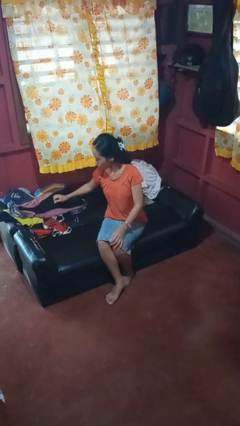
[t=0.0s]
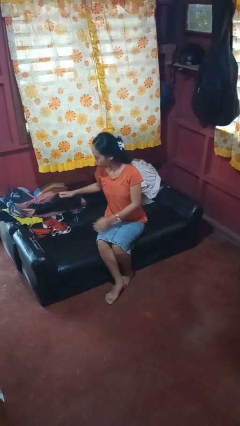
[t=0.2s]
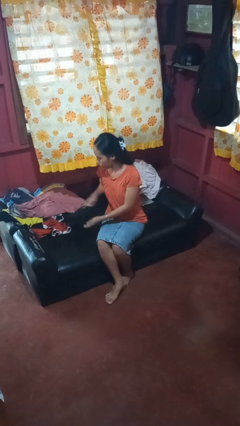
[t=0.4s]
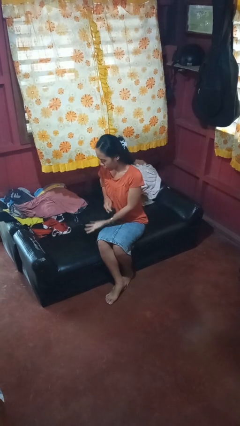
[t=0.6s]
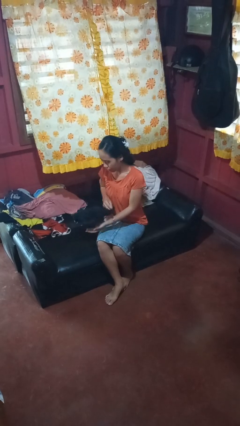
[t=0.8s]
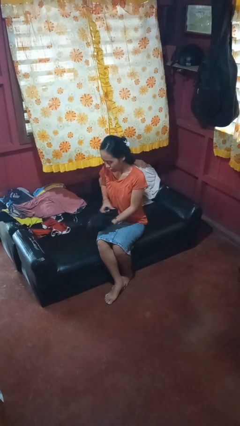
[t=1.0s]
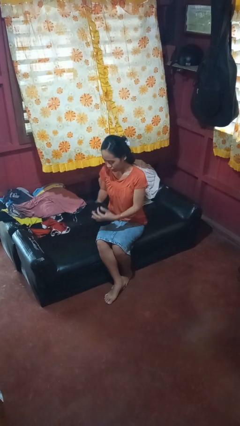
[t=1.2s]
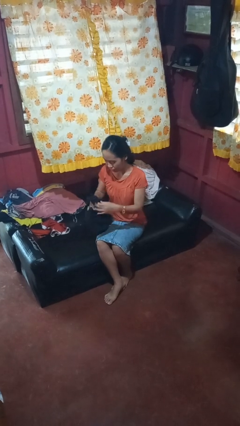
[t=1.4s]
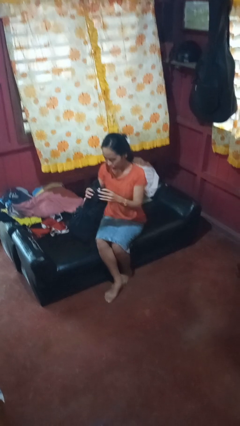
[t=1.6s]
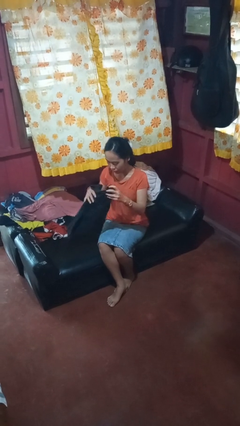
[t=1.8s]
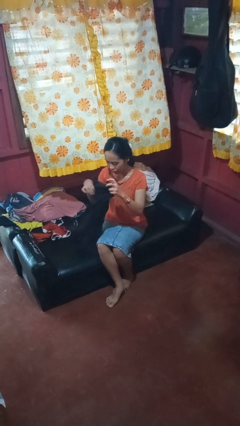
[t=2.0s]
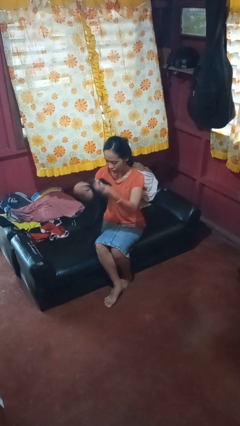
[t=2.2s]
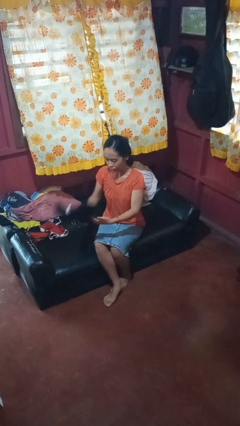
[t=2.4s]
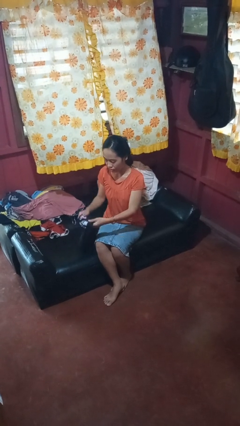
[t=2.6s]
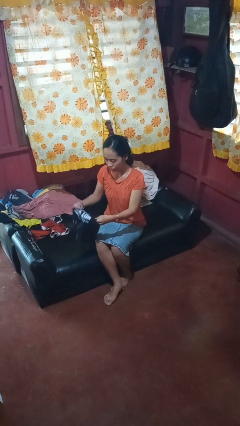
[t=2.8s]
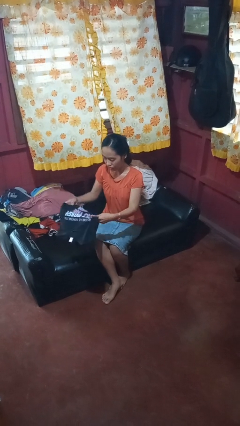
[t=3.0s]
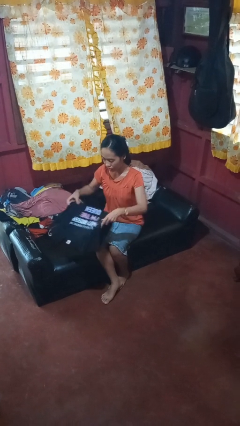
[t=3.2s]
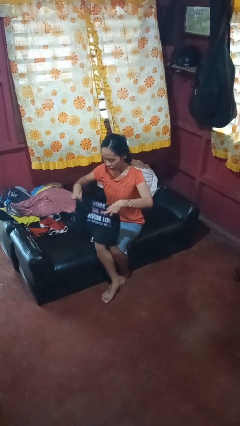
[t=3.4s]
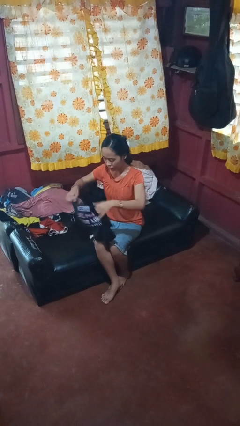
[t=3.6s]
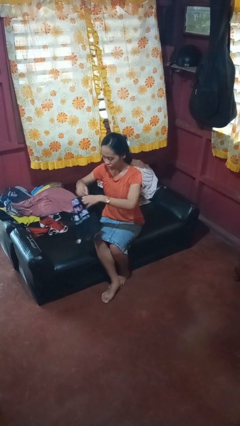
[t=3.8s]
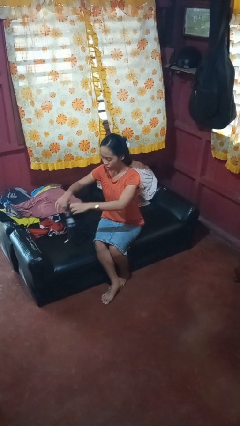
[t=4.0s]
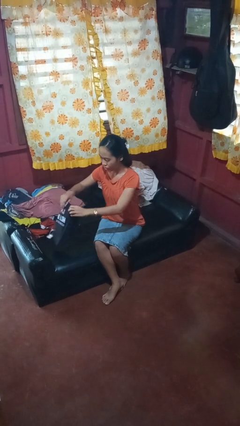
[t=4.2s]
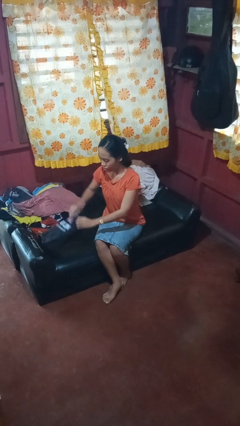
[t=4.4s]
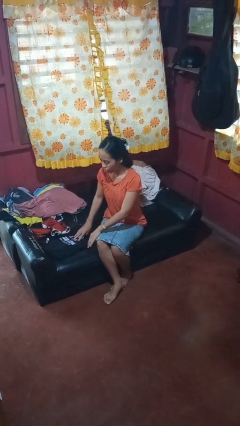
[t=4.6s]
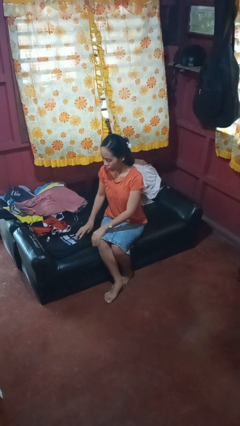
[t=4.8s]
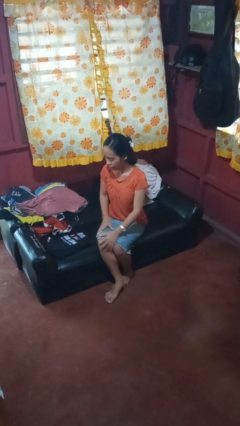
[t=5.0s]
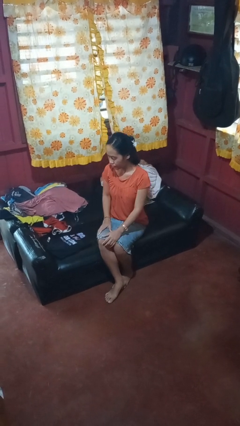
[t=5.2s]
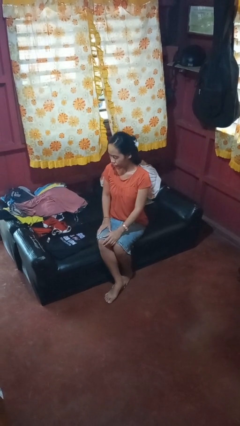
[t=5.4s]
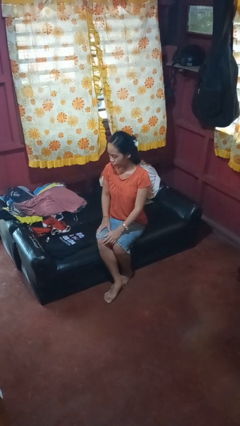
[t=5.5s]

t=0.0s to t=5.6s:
person folds shirt

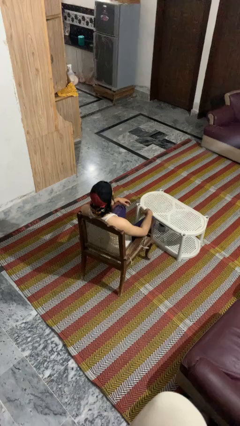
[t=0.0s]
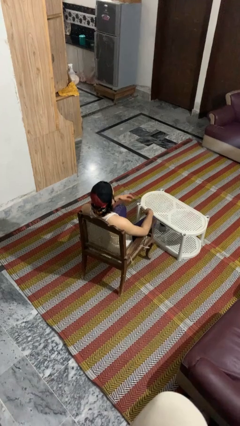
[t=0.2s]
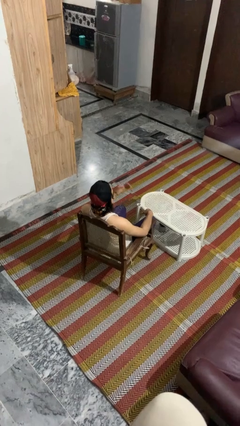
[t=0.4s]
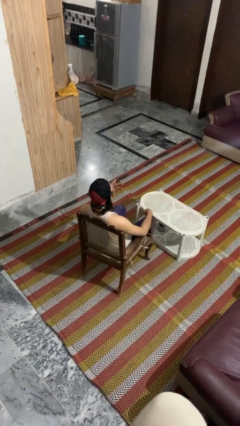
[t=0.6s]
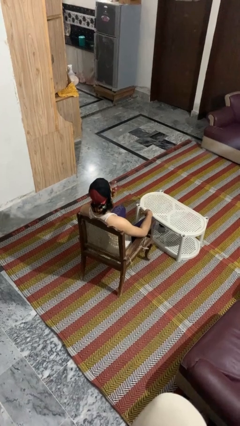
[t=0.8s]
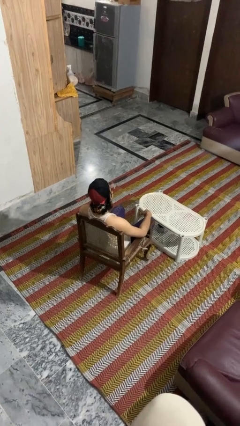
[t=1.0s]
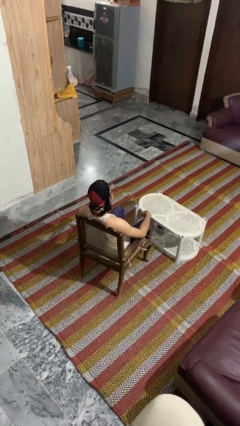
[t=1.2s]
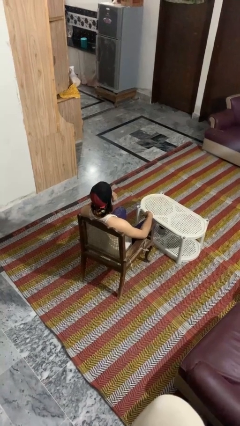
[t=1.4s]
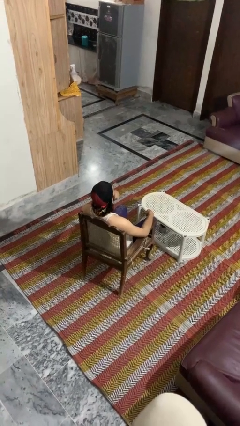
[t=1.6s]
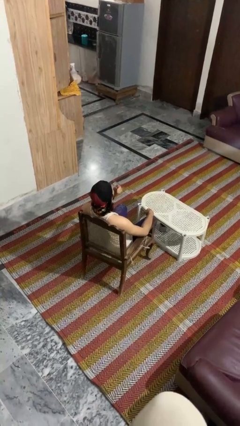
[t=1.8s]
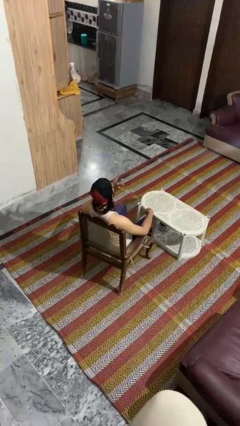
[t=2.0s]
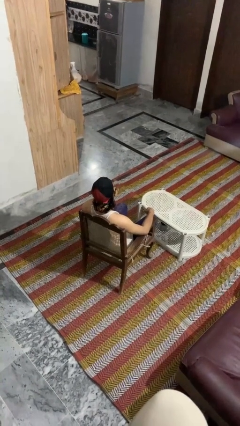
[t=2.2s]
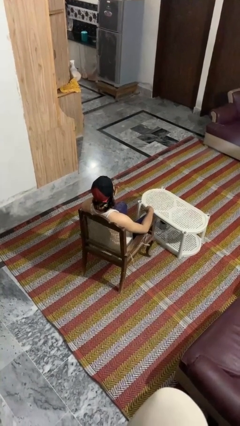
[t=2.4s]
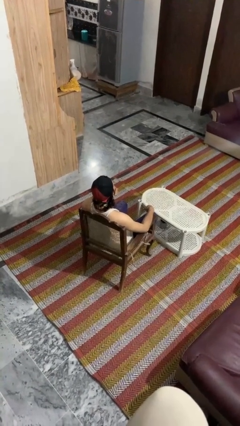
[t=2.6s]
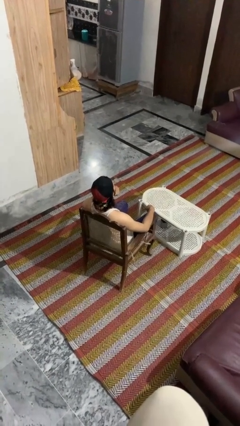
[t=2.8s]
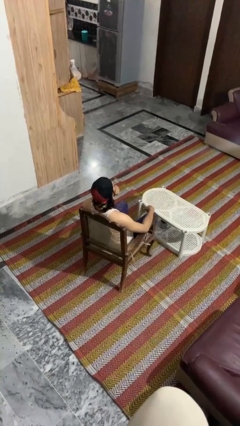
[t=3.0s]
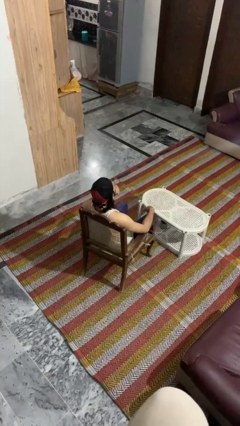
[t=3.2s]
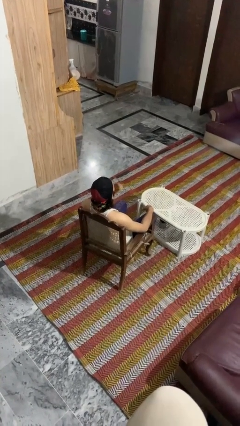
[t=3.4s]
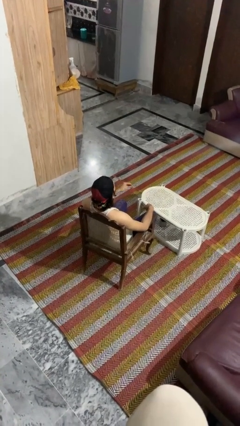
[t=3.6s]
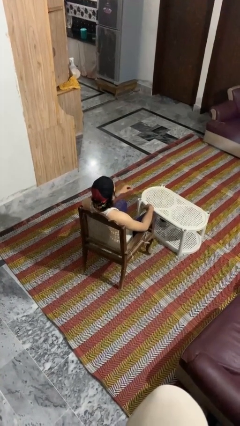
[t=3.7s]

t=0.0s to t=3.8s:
person strokes chin

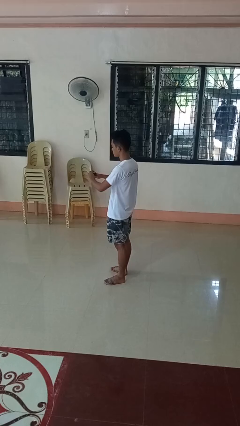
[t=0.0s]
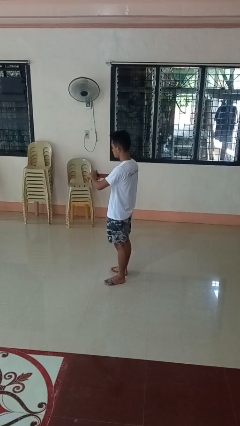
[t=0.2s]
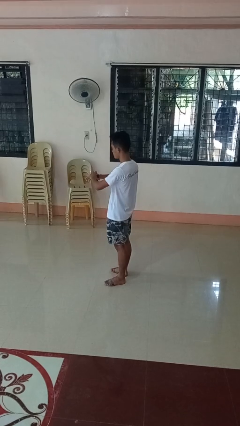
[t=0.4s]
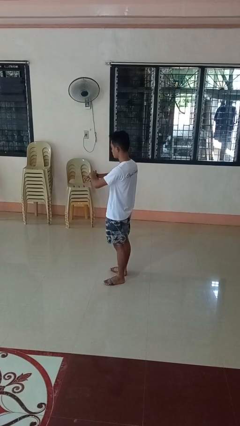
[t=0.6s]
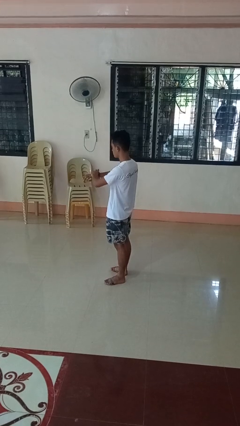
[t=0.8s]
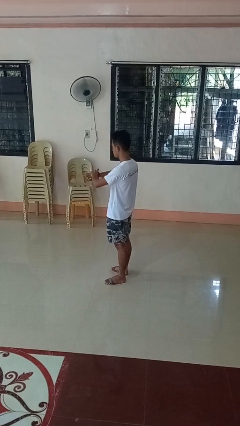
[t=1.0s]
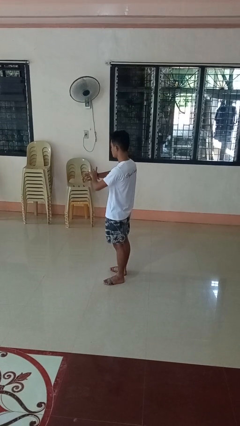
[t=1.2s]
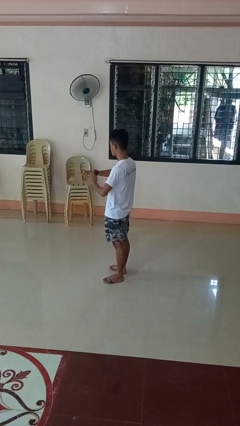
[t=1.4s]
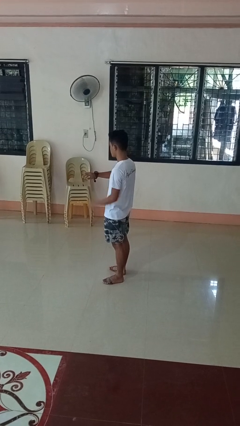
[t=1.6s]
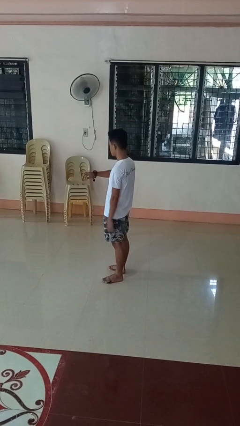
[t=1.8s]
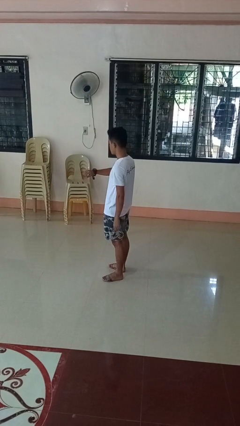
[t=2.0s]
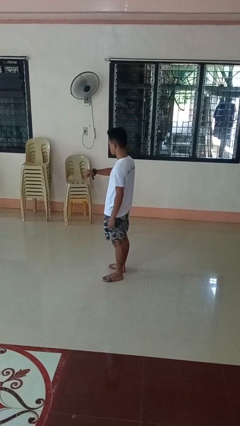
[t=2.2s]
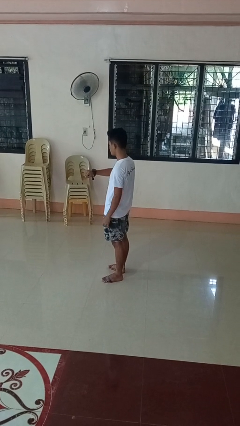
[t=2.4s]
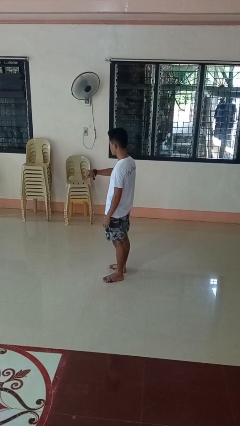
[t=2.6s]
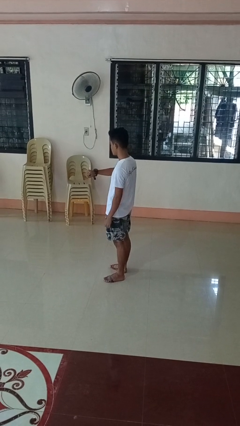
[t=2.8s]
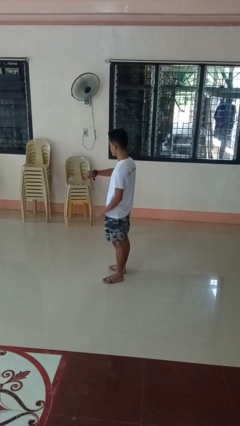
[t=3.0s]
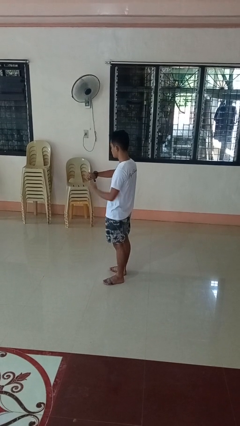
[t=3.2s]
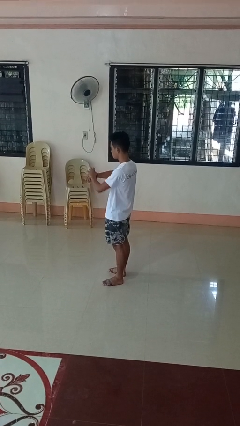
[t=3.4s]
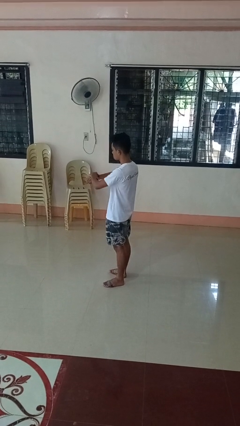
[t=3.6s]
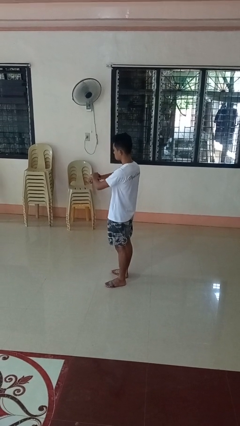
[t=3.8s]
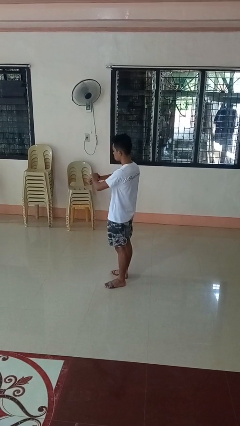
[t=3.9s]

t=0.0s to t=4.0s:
person puts on wristwatch

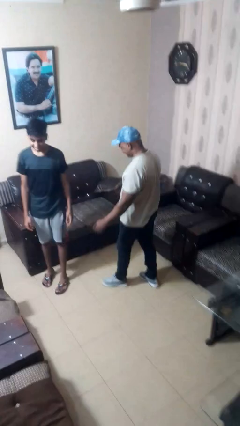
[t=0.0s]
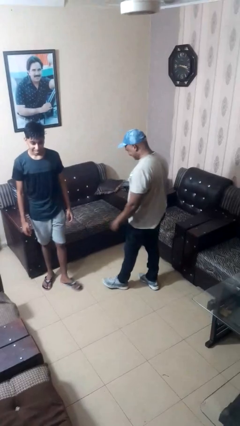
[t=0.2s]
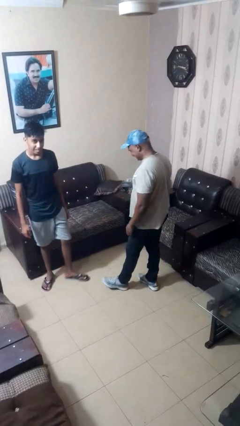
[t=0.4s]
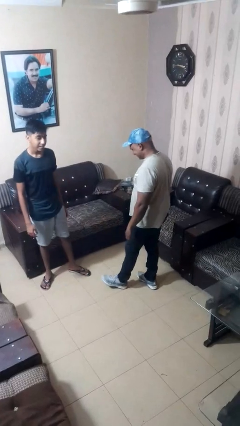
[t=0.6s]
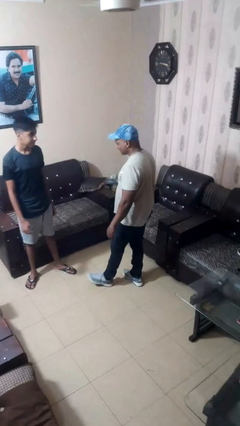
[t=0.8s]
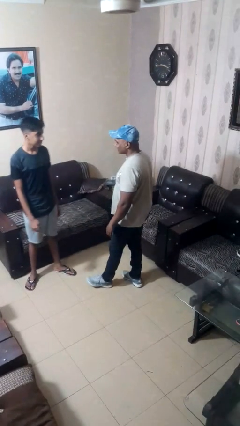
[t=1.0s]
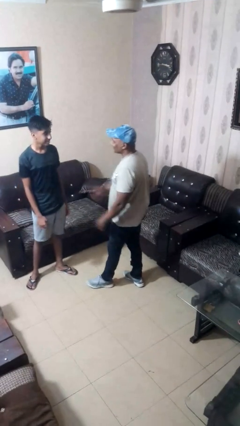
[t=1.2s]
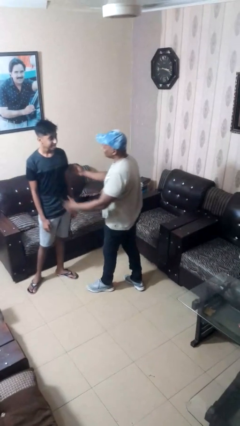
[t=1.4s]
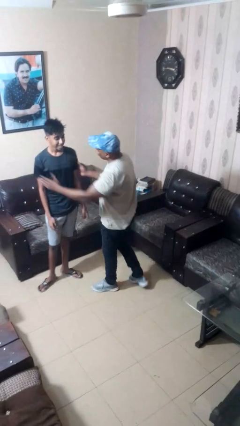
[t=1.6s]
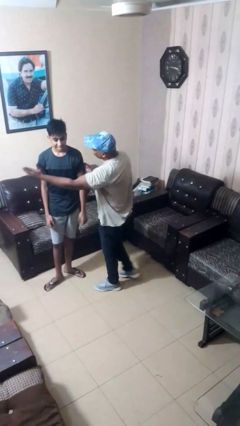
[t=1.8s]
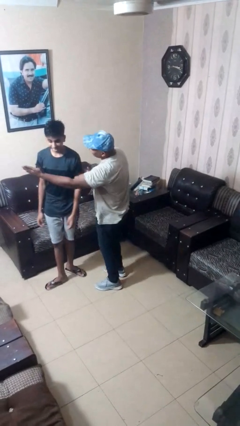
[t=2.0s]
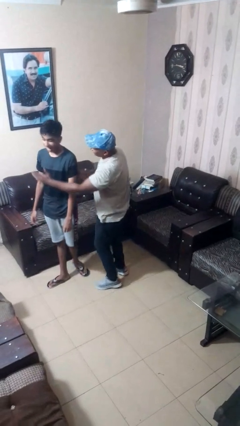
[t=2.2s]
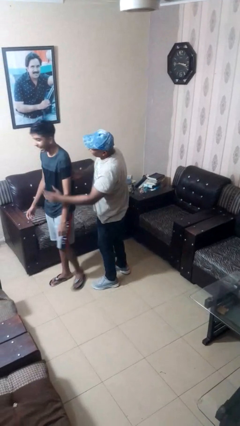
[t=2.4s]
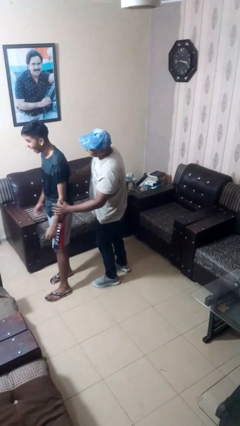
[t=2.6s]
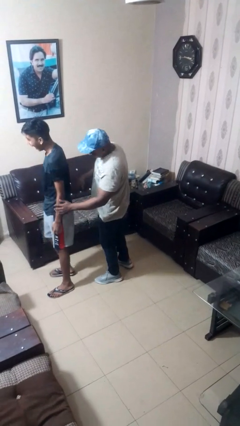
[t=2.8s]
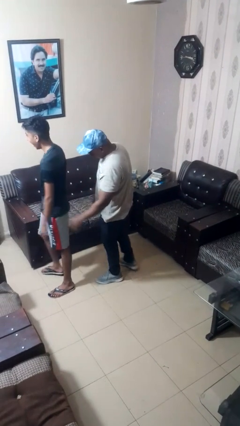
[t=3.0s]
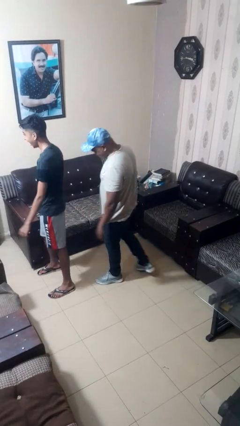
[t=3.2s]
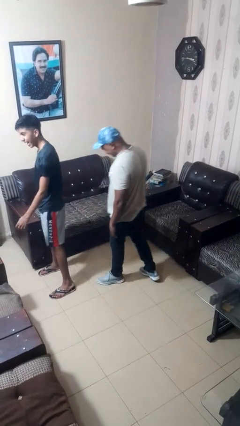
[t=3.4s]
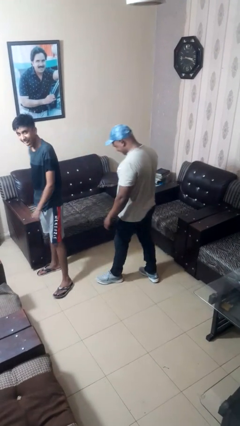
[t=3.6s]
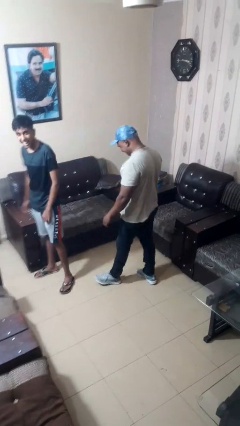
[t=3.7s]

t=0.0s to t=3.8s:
person shoves person

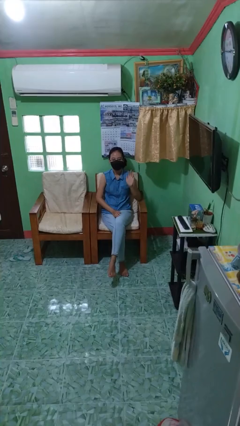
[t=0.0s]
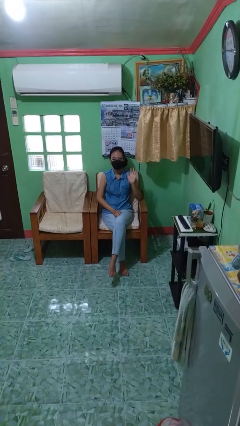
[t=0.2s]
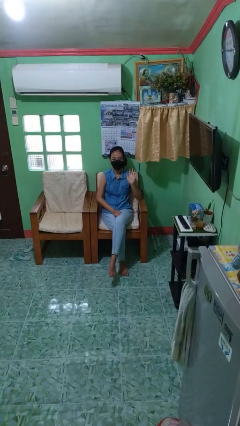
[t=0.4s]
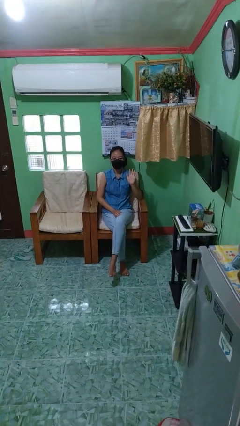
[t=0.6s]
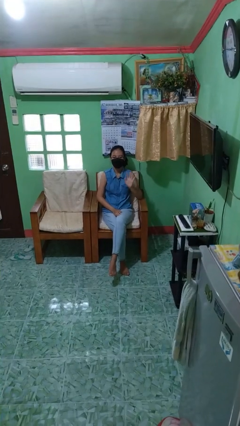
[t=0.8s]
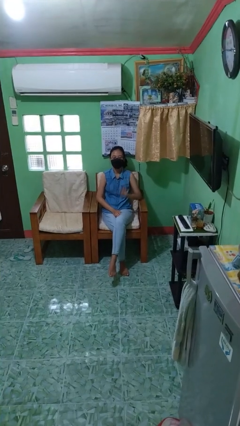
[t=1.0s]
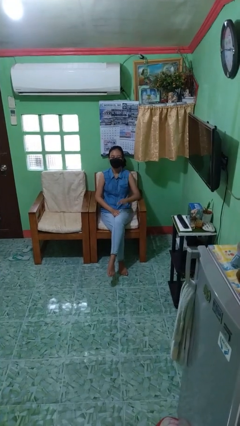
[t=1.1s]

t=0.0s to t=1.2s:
person gestures number five
